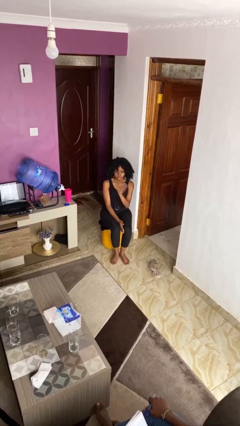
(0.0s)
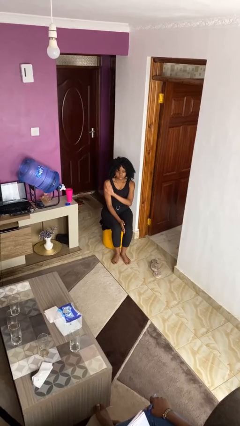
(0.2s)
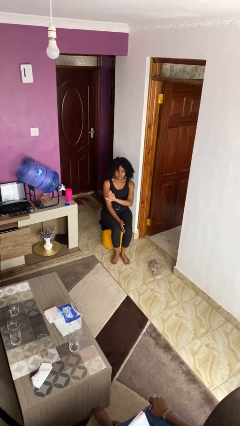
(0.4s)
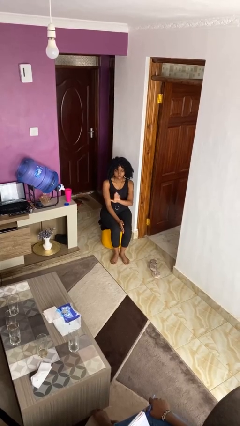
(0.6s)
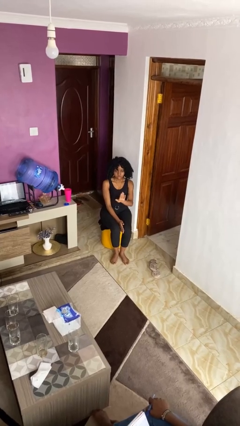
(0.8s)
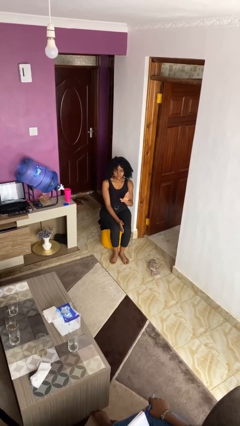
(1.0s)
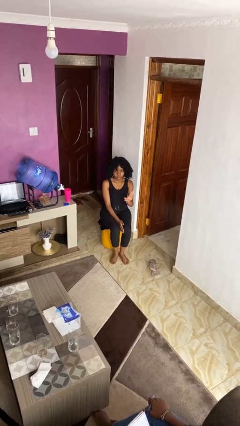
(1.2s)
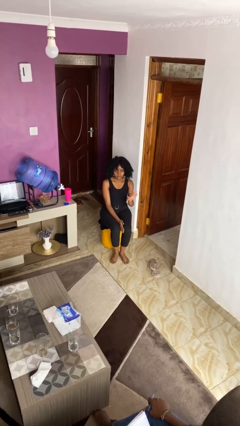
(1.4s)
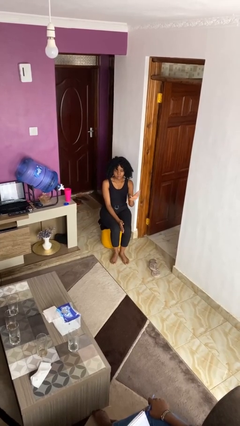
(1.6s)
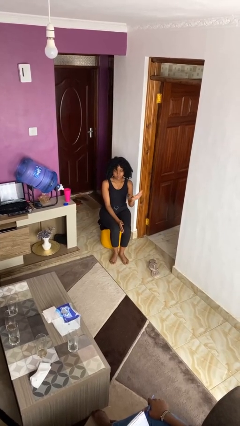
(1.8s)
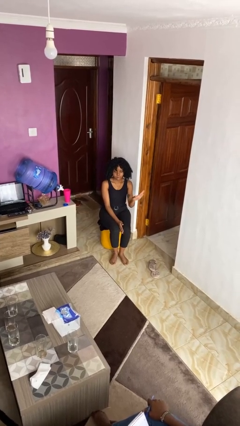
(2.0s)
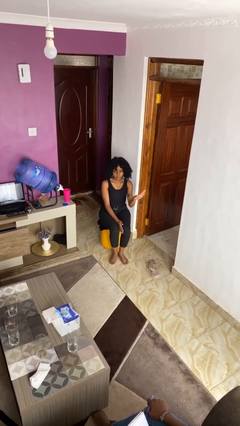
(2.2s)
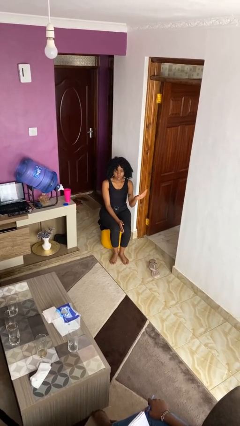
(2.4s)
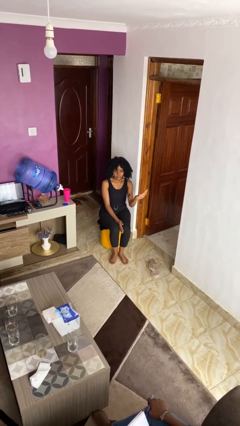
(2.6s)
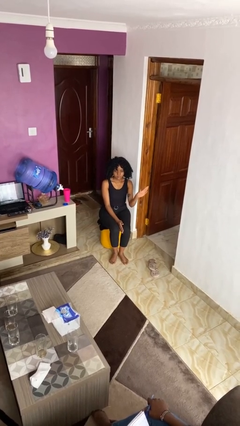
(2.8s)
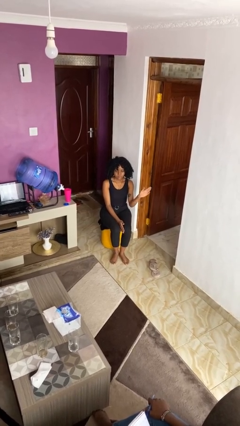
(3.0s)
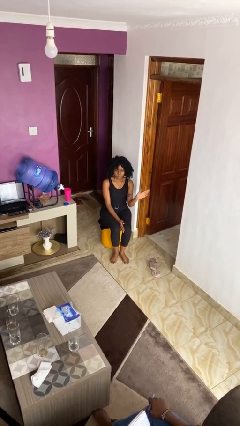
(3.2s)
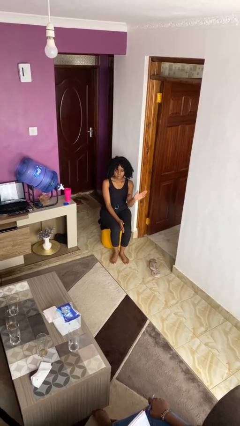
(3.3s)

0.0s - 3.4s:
person gestures swipe left

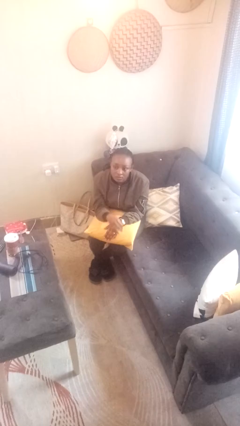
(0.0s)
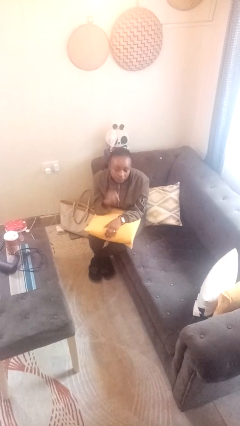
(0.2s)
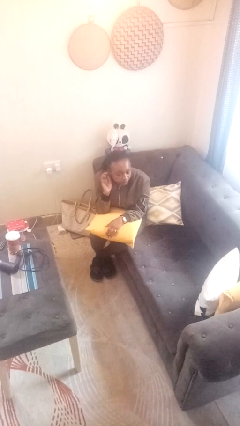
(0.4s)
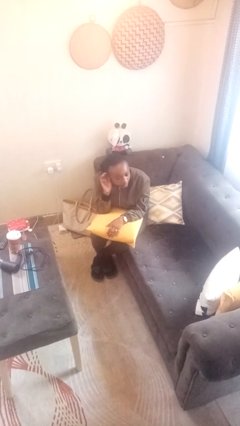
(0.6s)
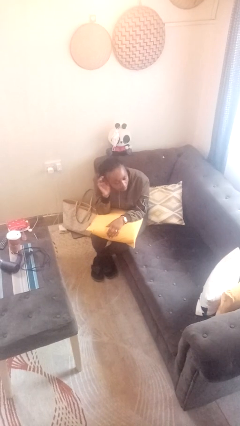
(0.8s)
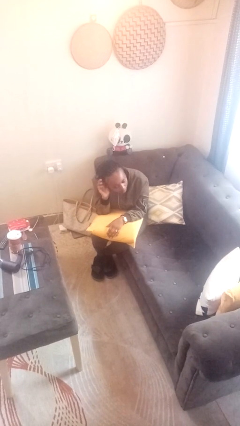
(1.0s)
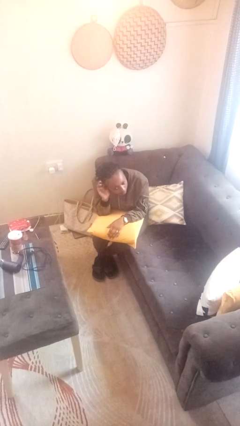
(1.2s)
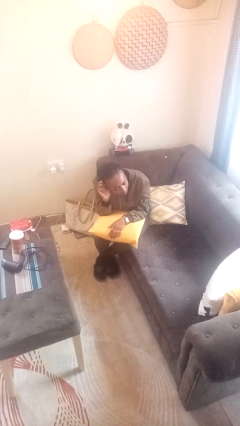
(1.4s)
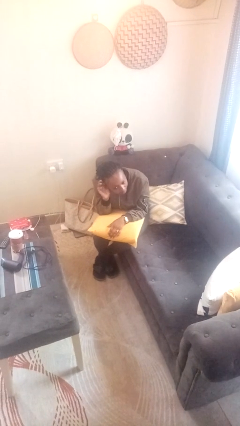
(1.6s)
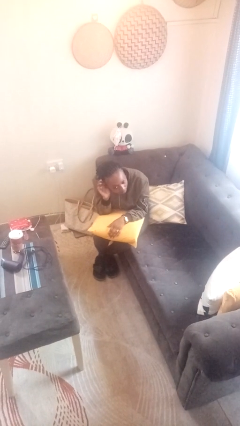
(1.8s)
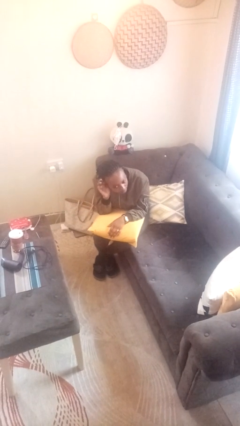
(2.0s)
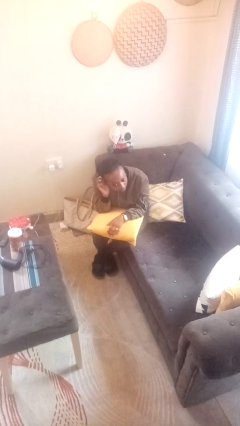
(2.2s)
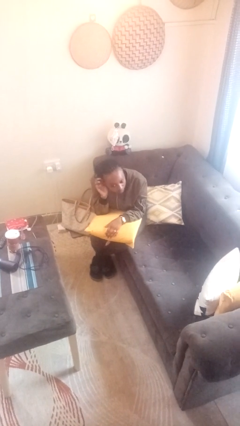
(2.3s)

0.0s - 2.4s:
person gestures listen closely

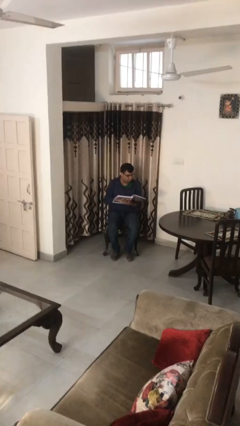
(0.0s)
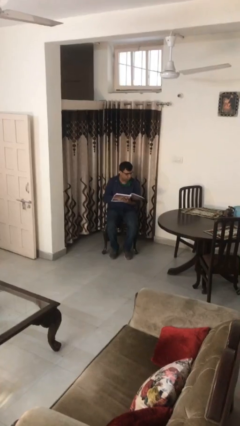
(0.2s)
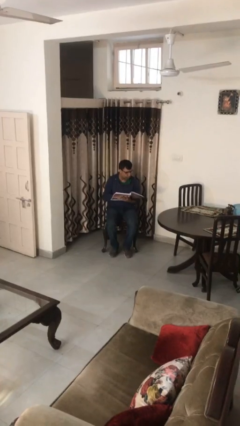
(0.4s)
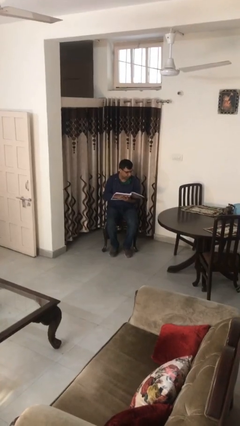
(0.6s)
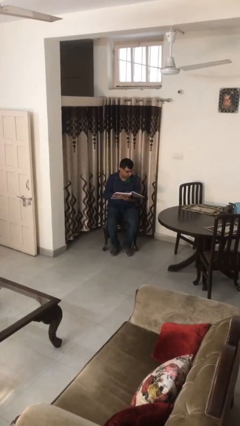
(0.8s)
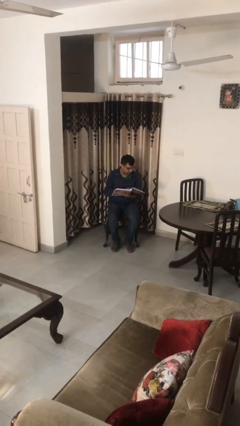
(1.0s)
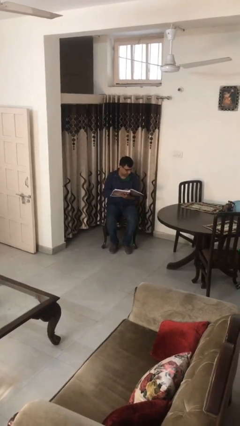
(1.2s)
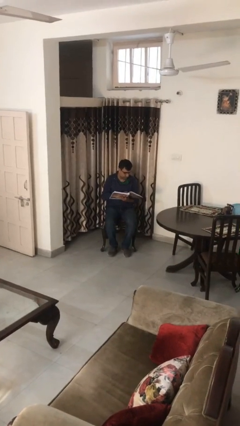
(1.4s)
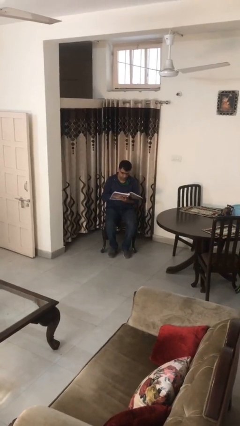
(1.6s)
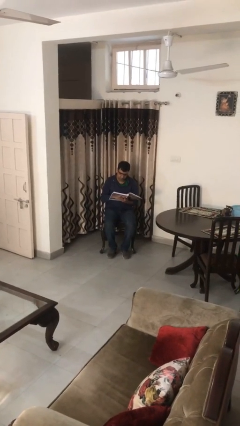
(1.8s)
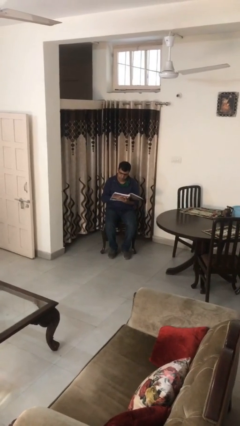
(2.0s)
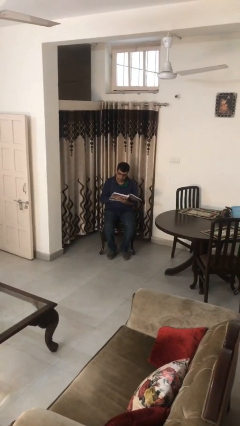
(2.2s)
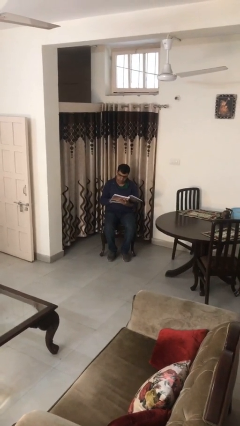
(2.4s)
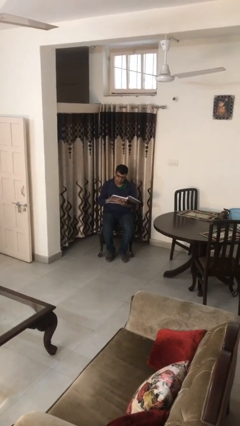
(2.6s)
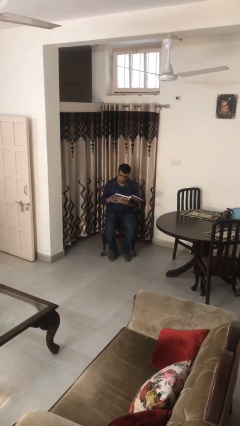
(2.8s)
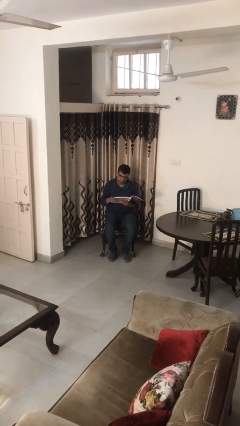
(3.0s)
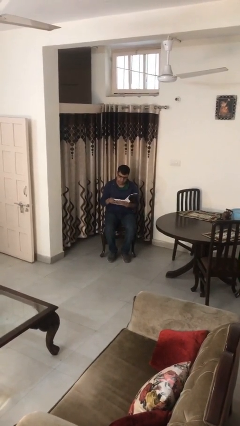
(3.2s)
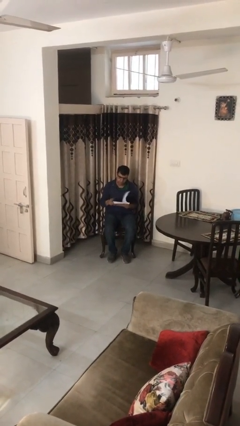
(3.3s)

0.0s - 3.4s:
person reads document

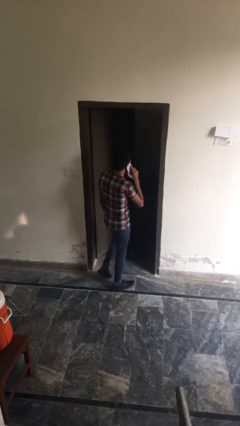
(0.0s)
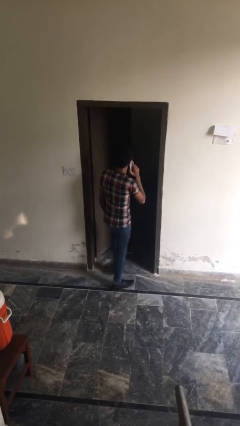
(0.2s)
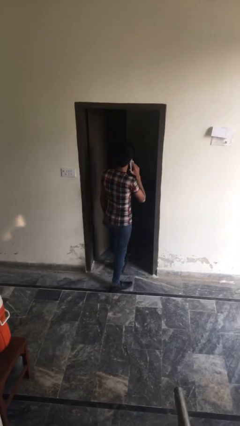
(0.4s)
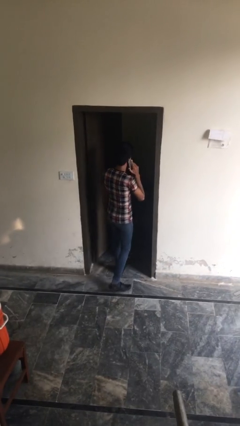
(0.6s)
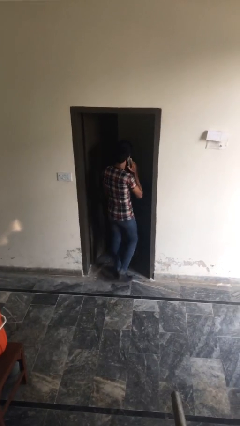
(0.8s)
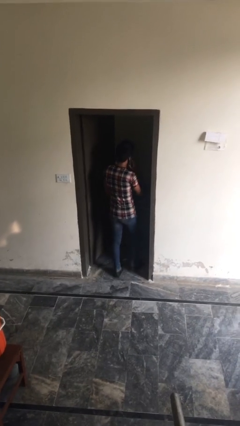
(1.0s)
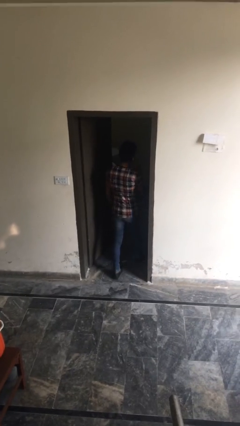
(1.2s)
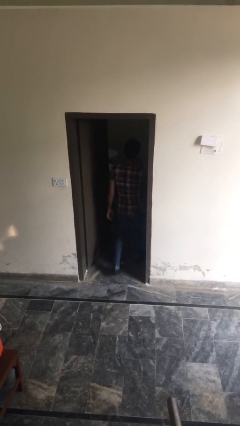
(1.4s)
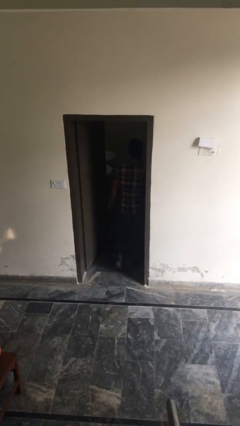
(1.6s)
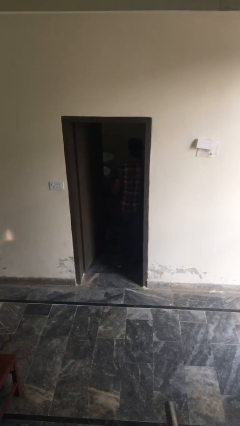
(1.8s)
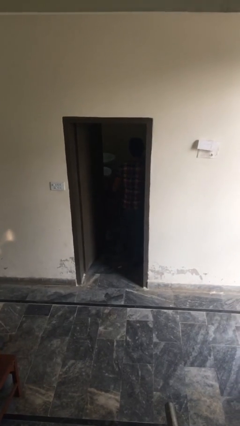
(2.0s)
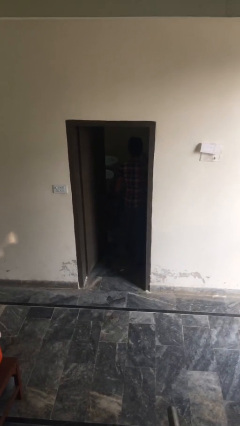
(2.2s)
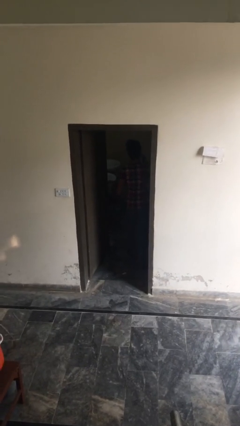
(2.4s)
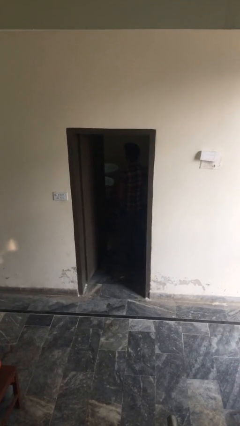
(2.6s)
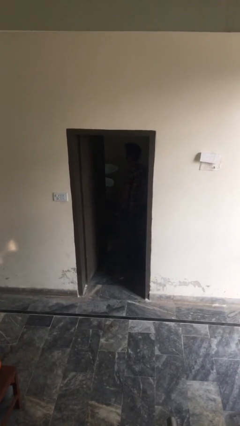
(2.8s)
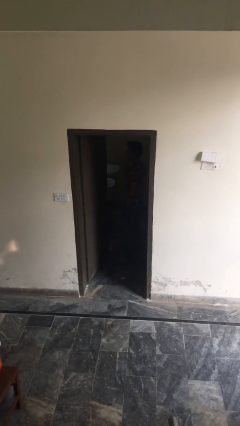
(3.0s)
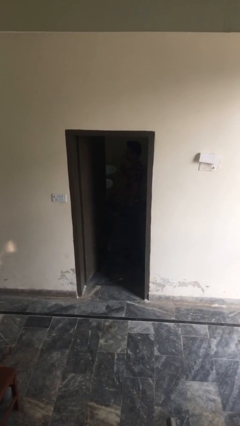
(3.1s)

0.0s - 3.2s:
person exits scene through structure

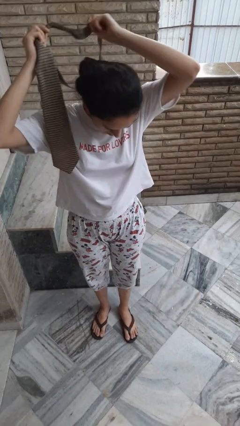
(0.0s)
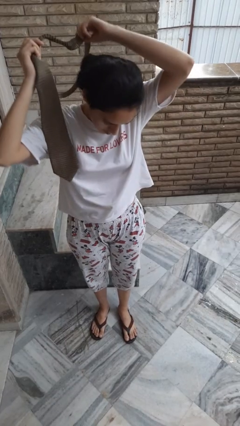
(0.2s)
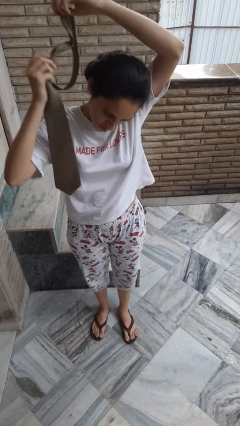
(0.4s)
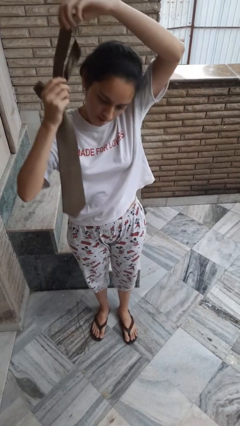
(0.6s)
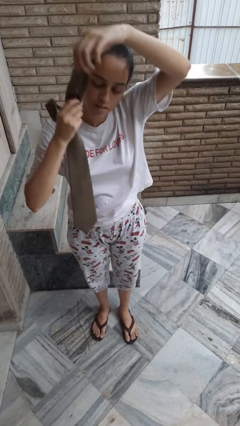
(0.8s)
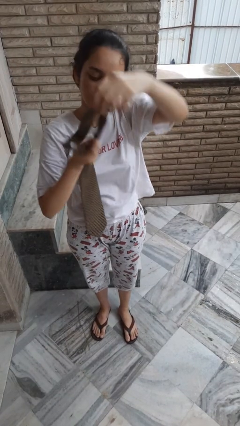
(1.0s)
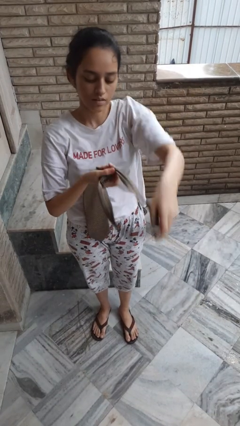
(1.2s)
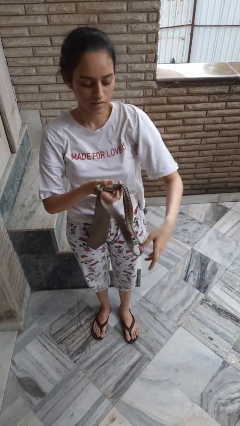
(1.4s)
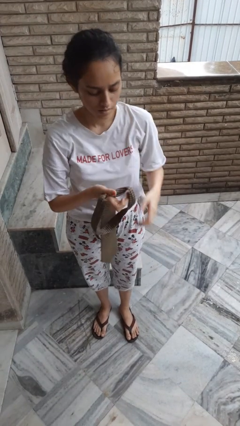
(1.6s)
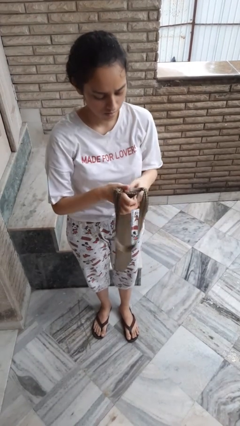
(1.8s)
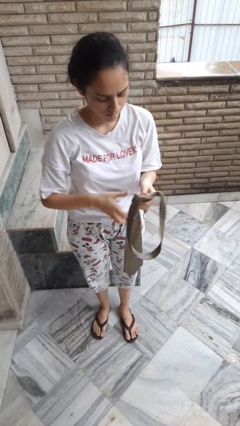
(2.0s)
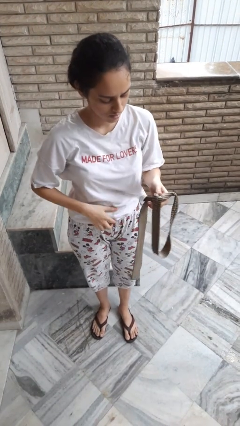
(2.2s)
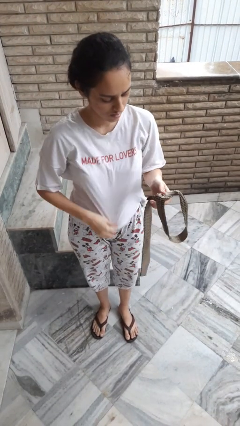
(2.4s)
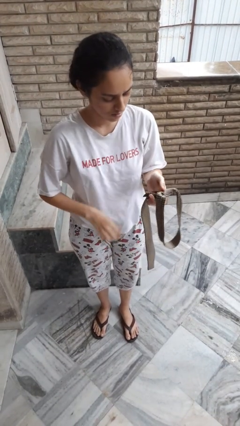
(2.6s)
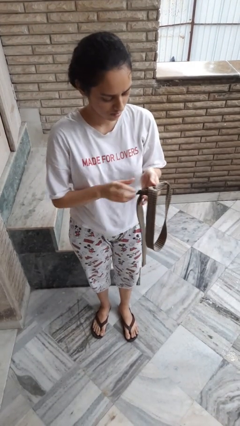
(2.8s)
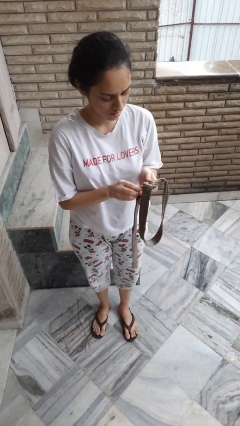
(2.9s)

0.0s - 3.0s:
person takes off necktie

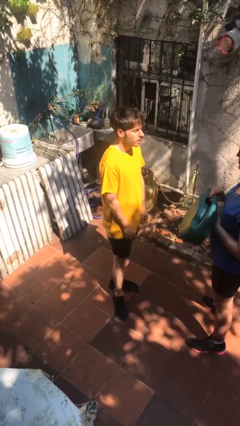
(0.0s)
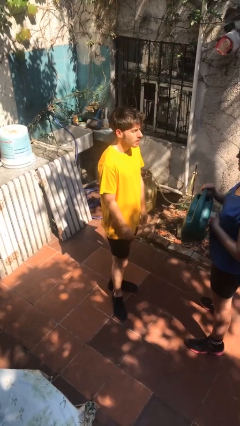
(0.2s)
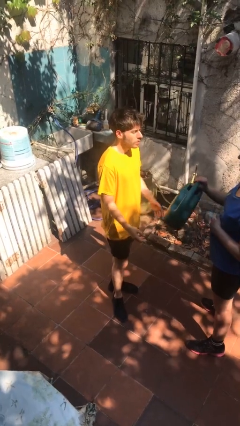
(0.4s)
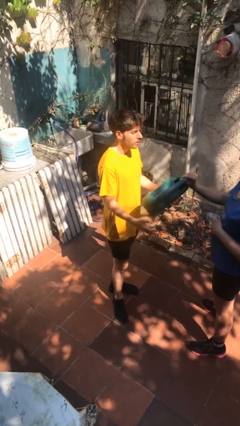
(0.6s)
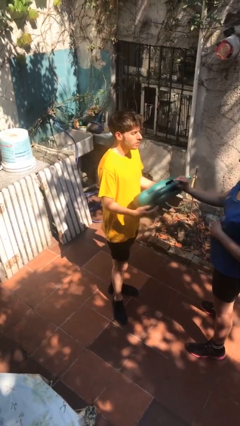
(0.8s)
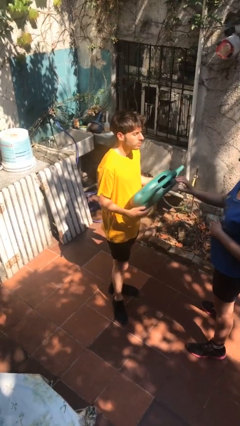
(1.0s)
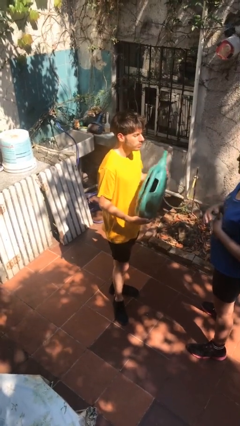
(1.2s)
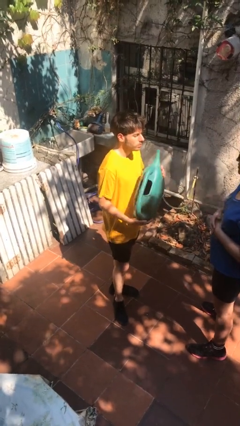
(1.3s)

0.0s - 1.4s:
person transfers object to person

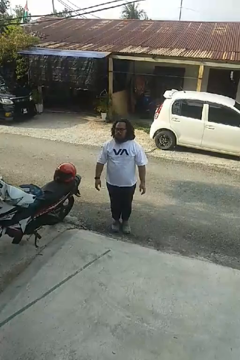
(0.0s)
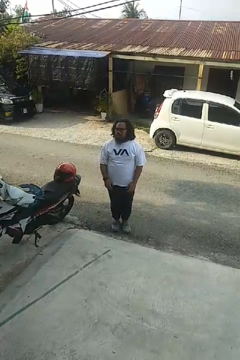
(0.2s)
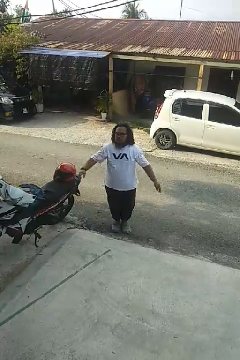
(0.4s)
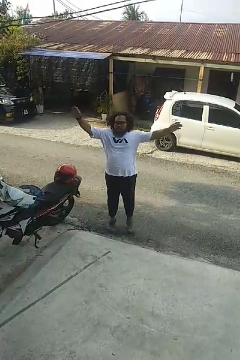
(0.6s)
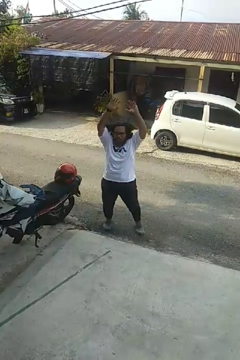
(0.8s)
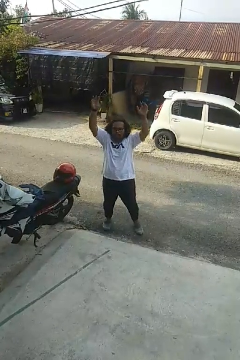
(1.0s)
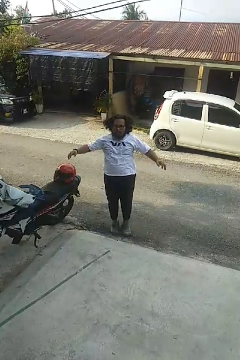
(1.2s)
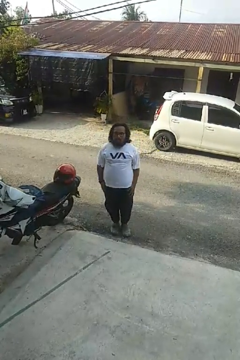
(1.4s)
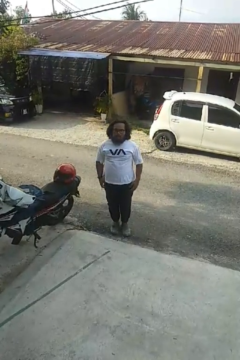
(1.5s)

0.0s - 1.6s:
person exercises with jumping jacks
